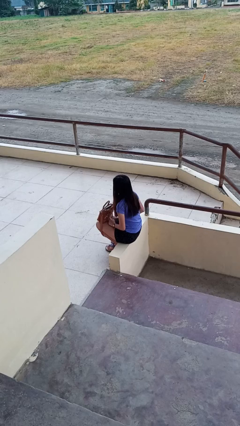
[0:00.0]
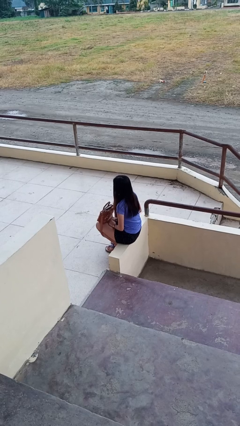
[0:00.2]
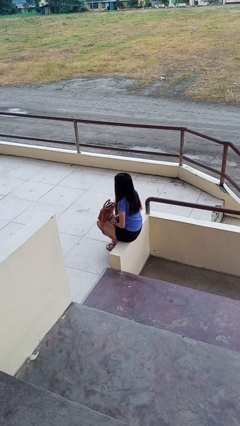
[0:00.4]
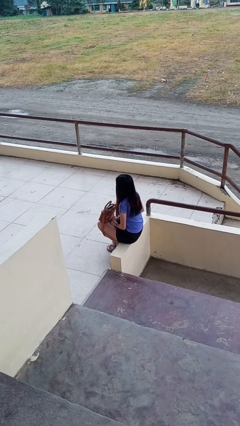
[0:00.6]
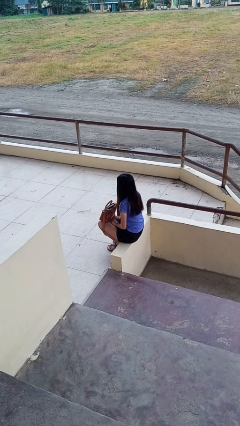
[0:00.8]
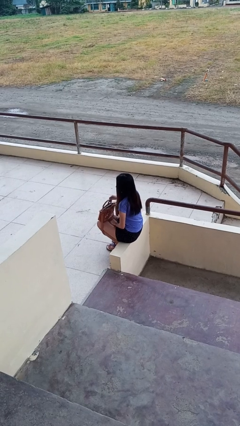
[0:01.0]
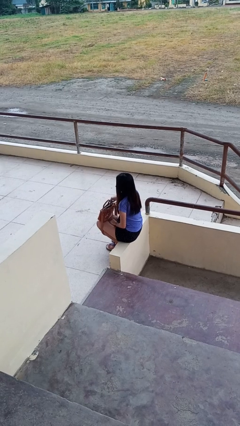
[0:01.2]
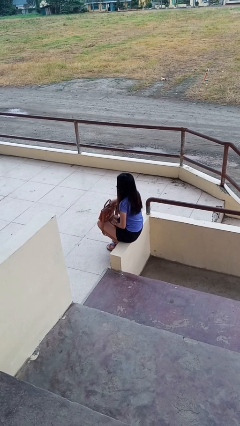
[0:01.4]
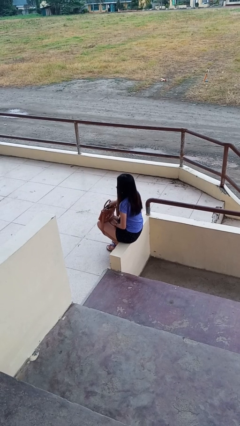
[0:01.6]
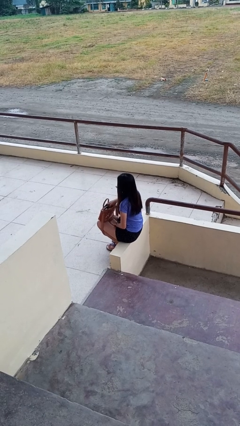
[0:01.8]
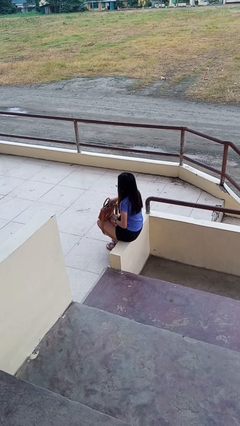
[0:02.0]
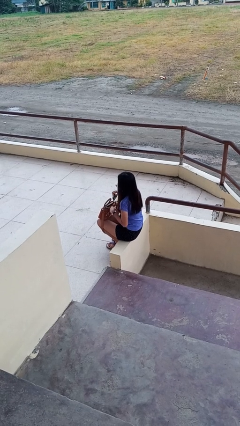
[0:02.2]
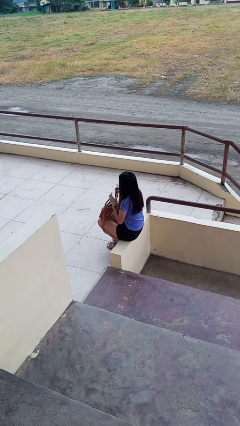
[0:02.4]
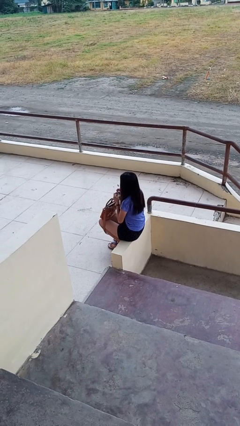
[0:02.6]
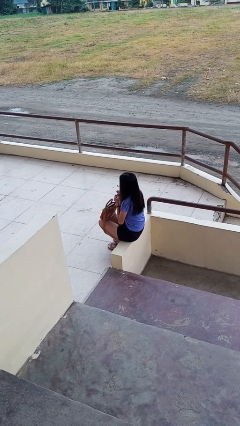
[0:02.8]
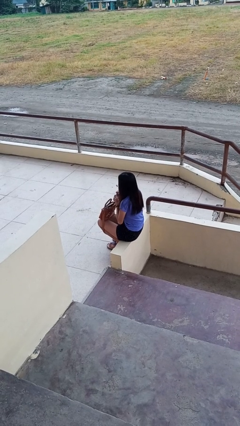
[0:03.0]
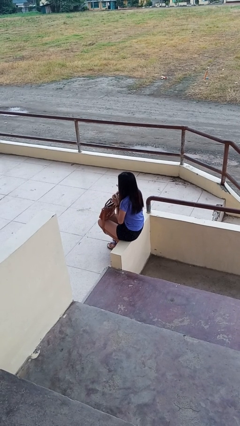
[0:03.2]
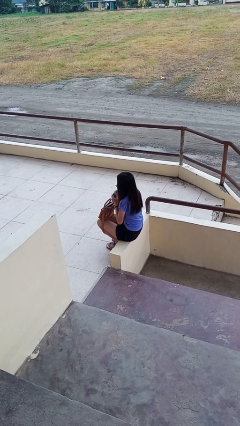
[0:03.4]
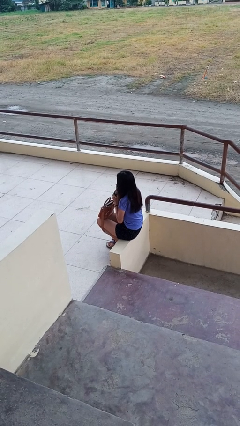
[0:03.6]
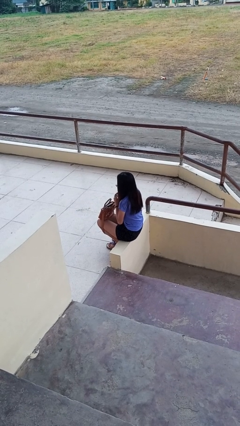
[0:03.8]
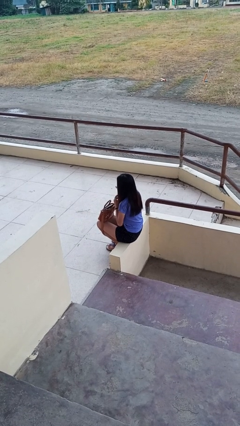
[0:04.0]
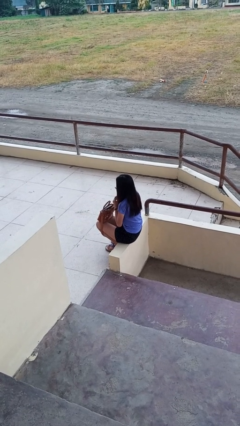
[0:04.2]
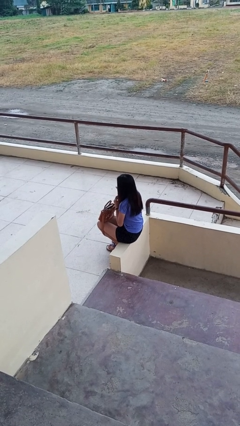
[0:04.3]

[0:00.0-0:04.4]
person eats snack from bag

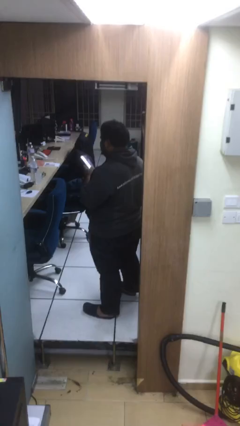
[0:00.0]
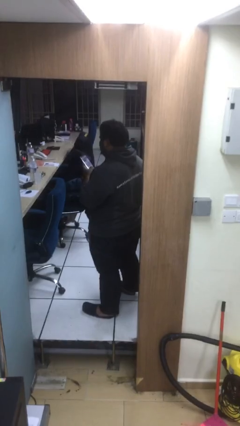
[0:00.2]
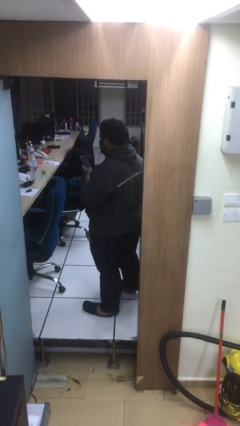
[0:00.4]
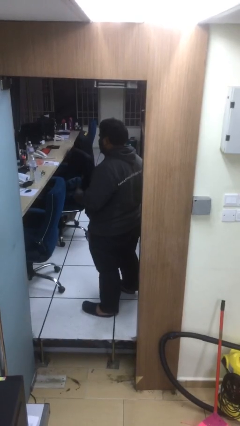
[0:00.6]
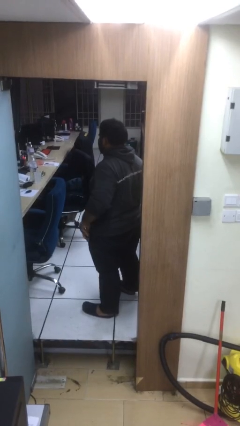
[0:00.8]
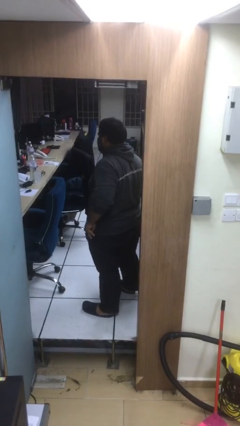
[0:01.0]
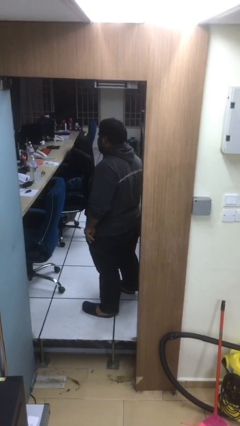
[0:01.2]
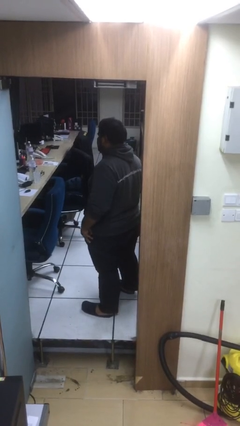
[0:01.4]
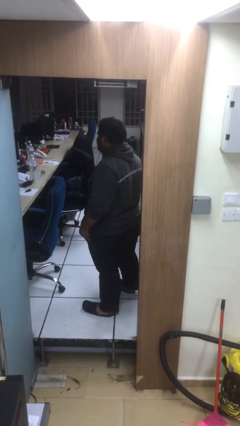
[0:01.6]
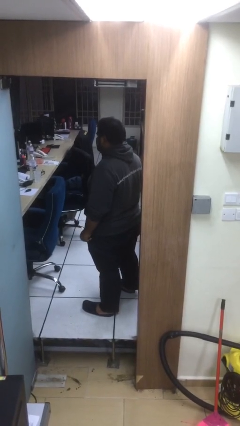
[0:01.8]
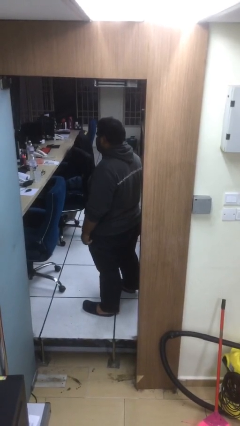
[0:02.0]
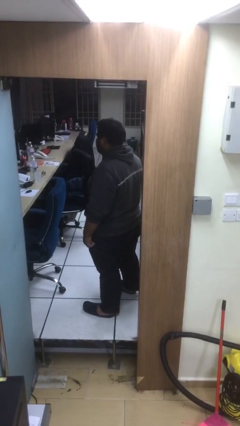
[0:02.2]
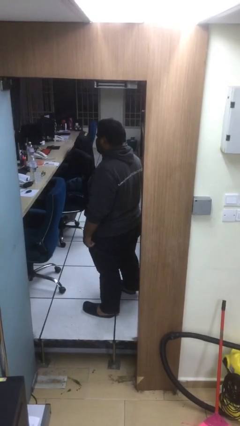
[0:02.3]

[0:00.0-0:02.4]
person puts phone into pocket

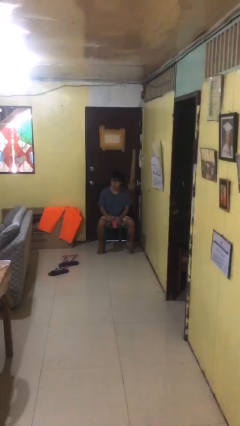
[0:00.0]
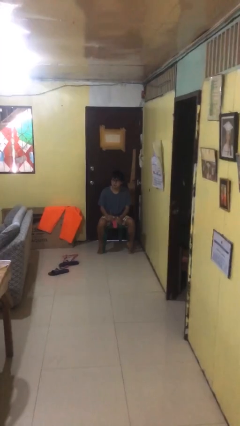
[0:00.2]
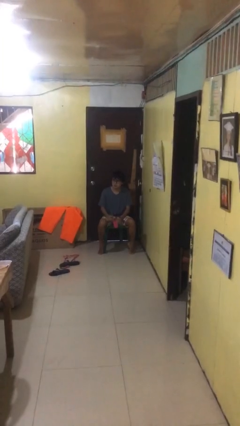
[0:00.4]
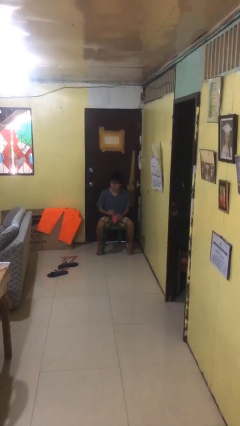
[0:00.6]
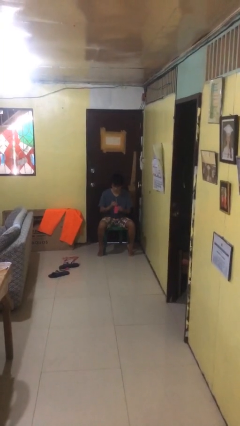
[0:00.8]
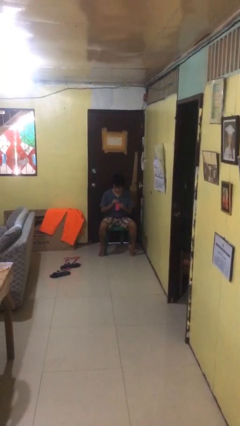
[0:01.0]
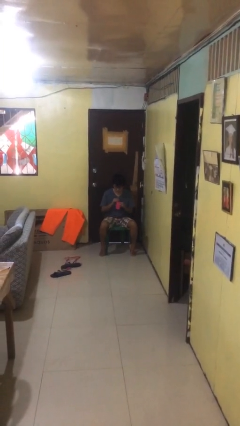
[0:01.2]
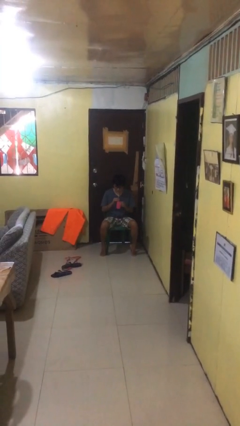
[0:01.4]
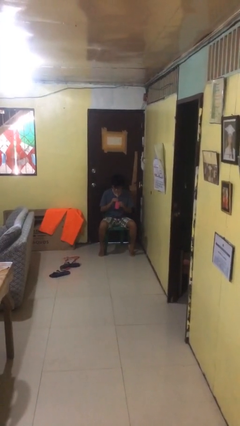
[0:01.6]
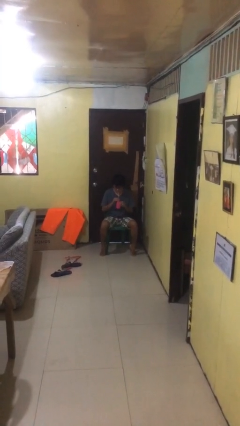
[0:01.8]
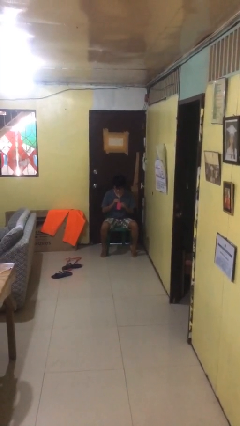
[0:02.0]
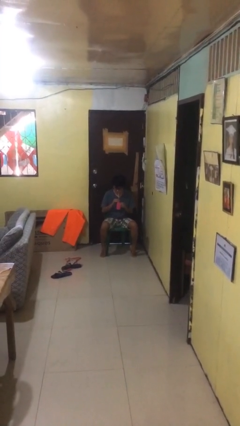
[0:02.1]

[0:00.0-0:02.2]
person drinks from straw

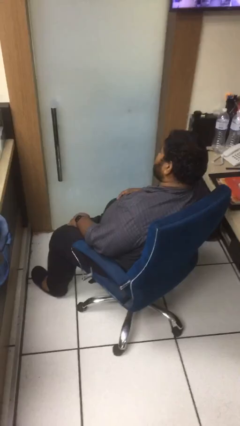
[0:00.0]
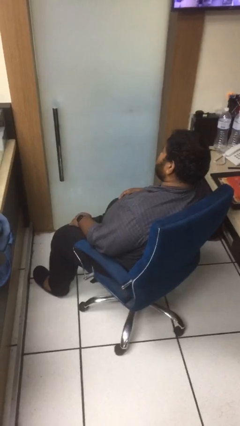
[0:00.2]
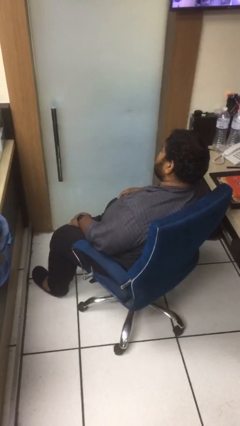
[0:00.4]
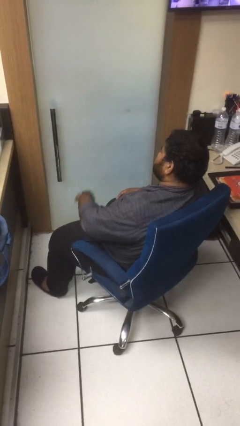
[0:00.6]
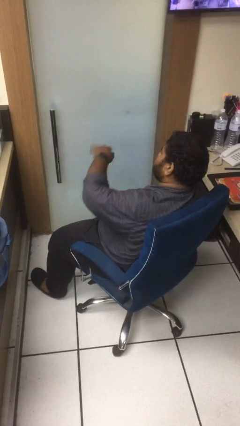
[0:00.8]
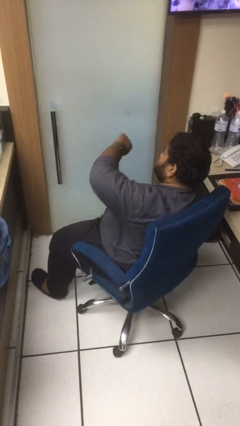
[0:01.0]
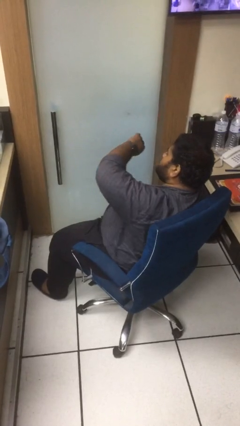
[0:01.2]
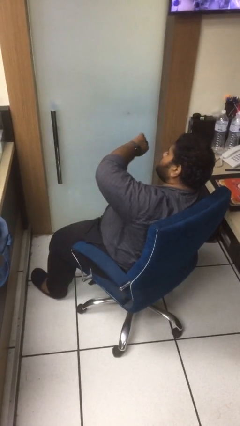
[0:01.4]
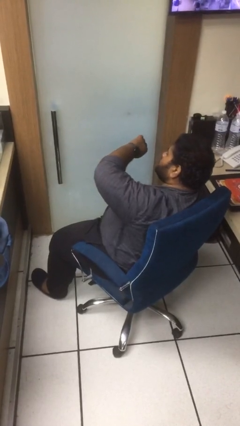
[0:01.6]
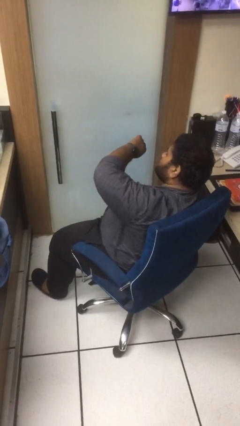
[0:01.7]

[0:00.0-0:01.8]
person looks at wristwatch

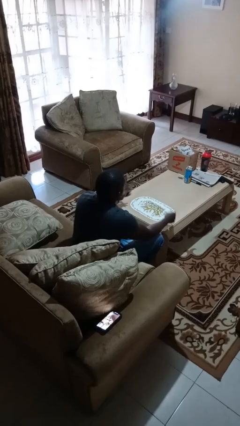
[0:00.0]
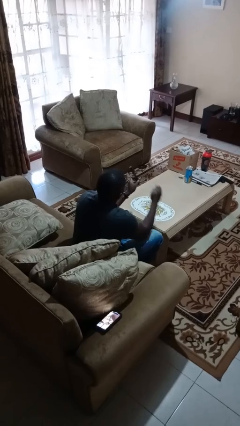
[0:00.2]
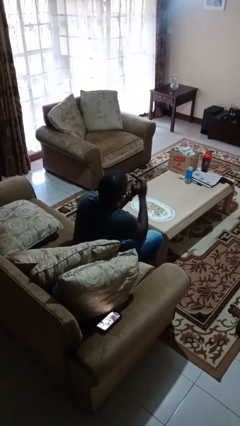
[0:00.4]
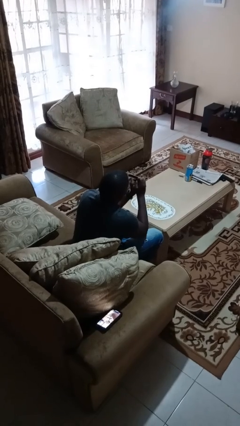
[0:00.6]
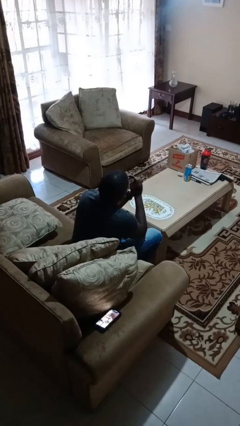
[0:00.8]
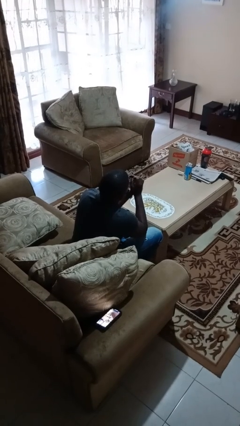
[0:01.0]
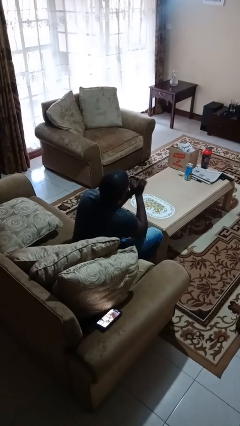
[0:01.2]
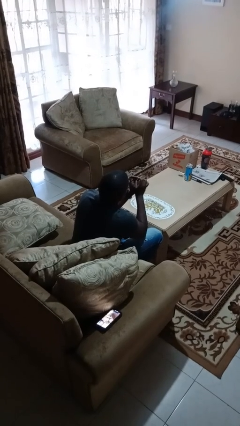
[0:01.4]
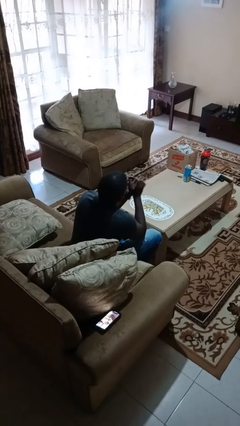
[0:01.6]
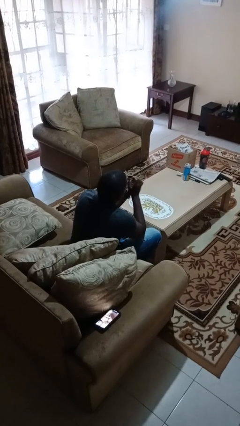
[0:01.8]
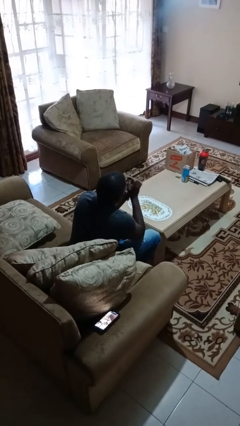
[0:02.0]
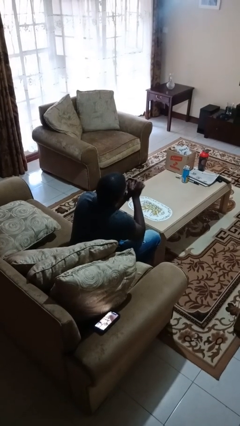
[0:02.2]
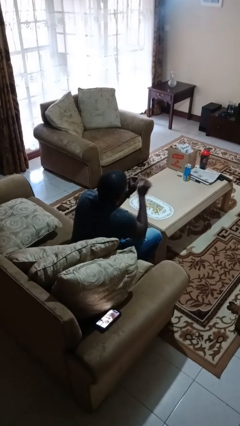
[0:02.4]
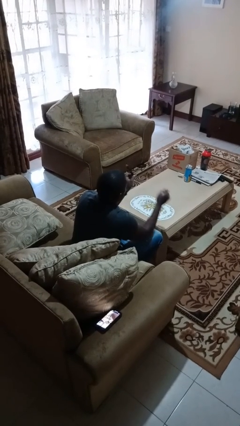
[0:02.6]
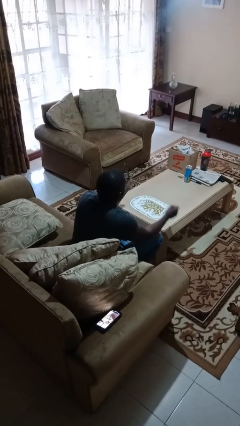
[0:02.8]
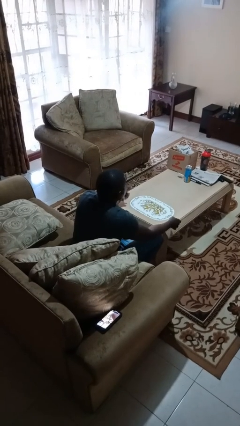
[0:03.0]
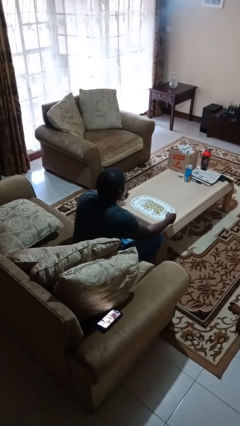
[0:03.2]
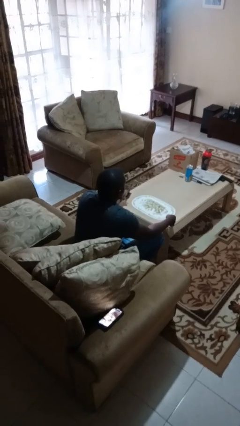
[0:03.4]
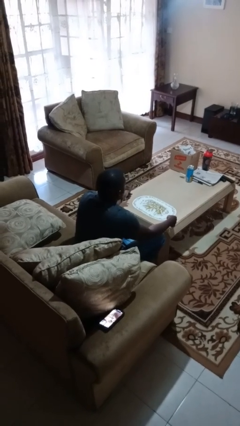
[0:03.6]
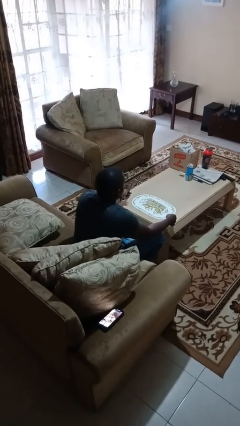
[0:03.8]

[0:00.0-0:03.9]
person files fingernails

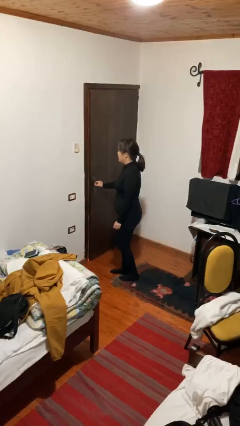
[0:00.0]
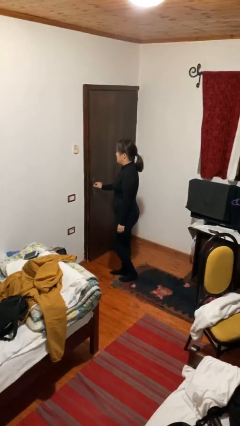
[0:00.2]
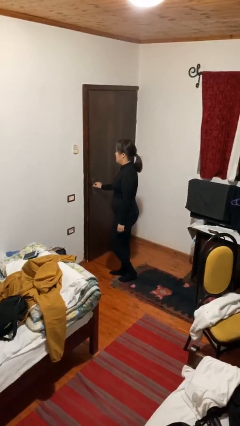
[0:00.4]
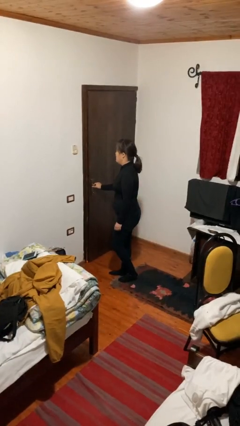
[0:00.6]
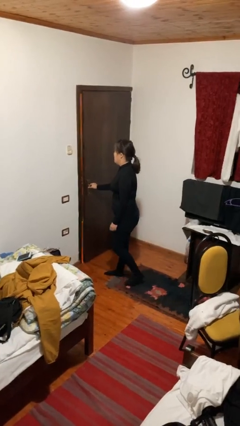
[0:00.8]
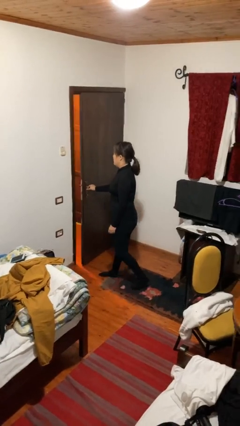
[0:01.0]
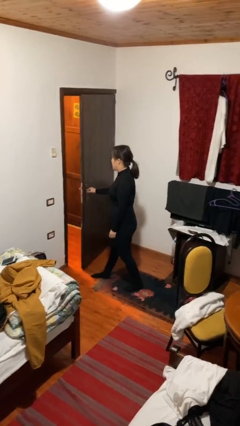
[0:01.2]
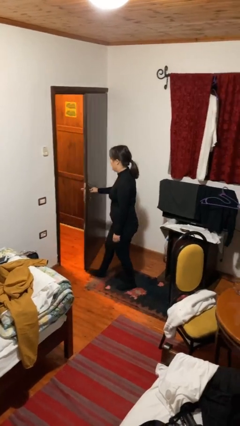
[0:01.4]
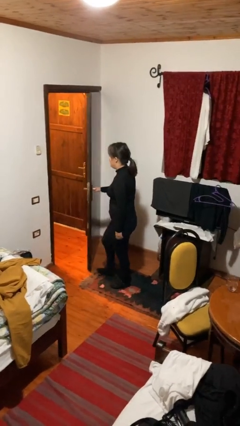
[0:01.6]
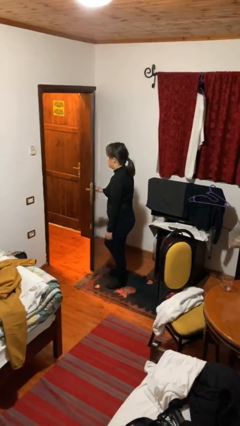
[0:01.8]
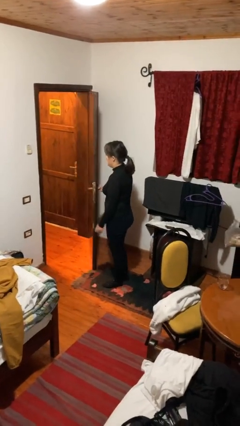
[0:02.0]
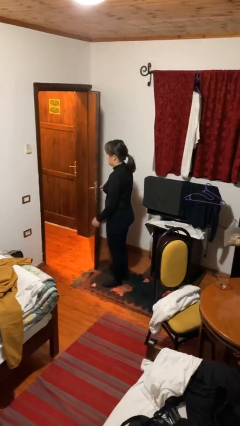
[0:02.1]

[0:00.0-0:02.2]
person opens facility door

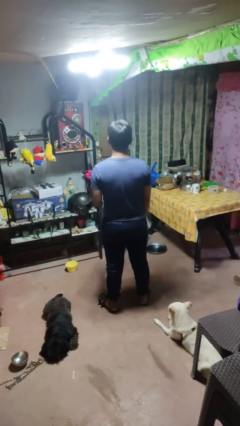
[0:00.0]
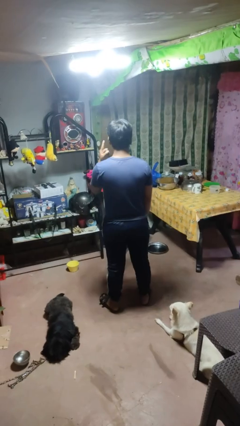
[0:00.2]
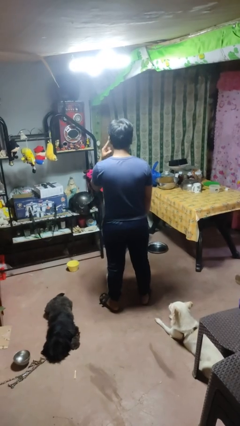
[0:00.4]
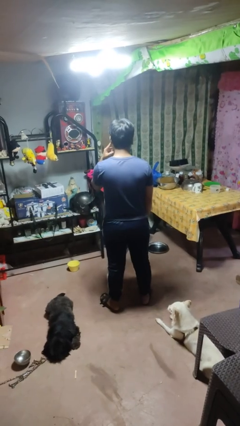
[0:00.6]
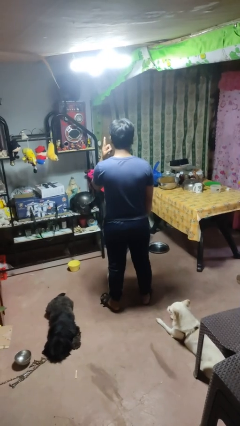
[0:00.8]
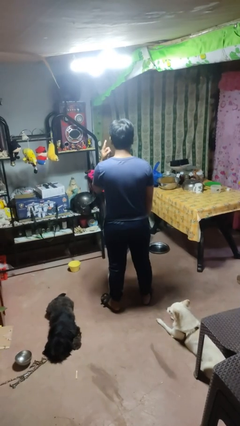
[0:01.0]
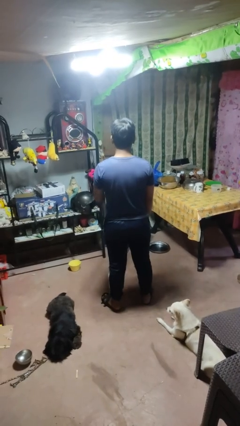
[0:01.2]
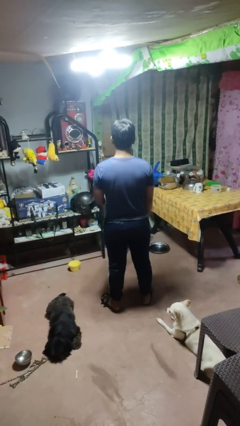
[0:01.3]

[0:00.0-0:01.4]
person gestures listen closely
